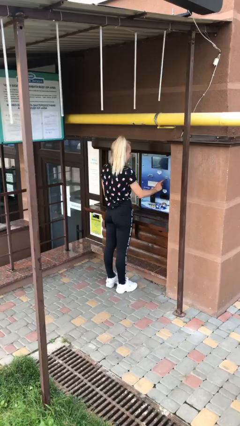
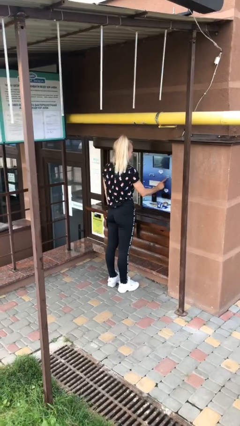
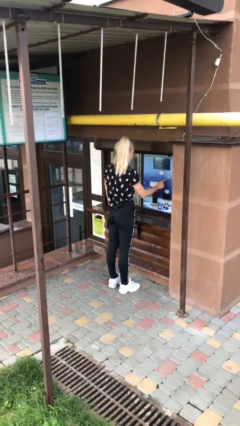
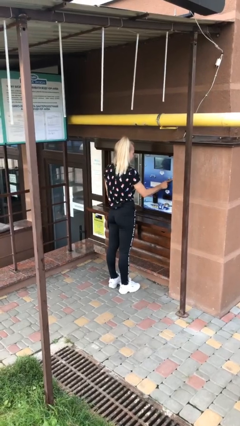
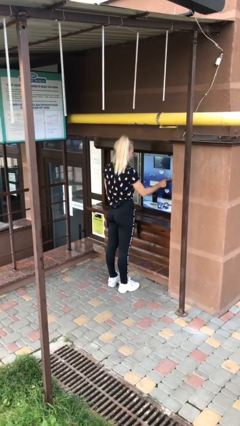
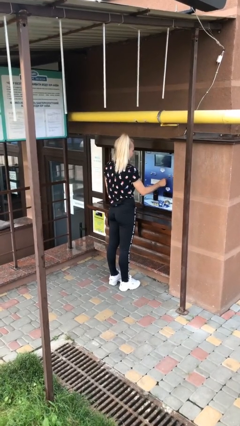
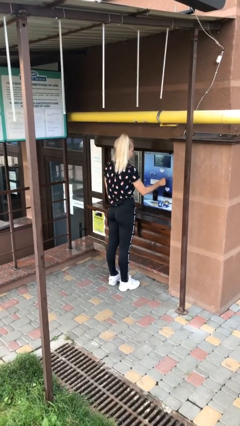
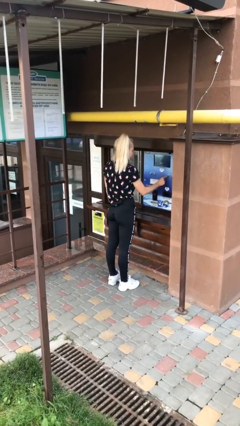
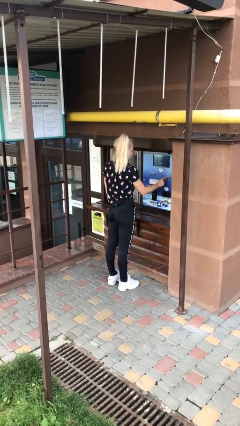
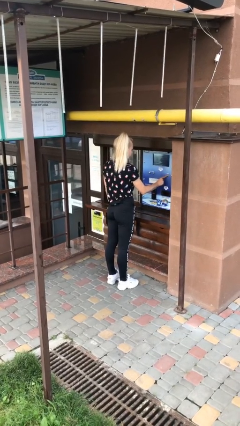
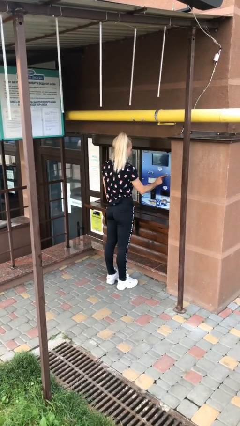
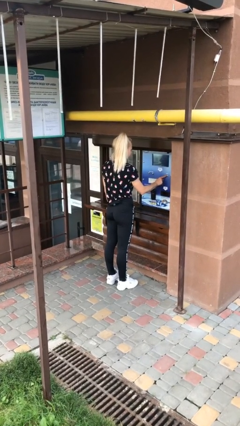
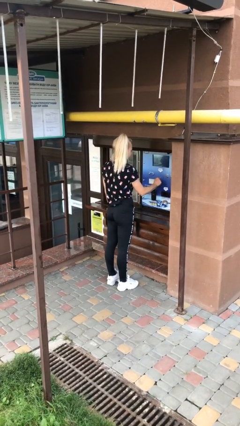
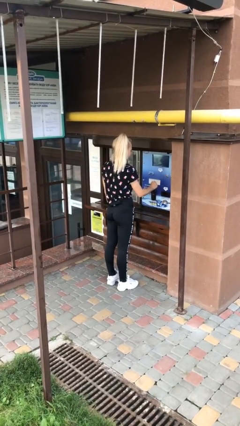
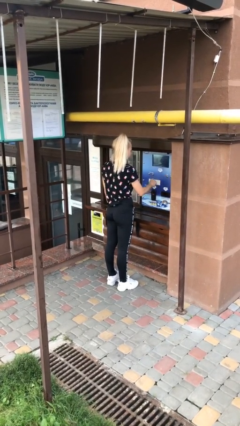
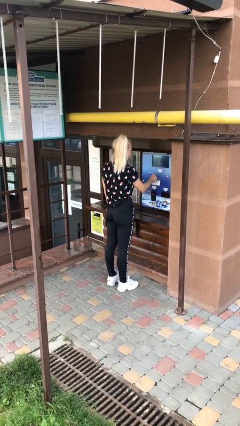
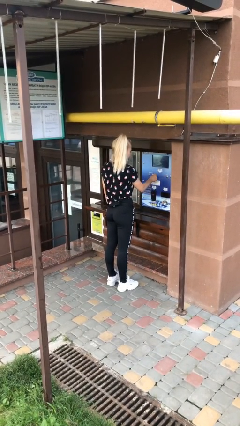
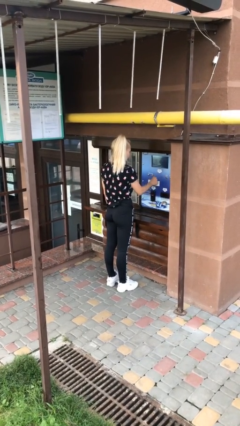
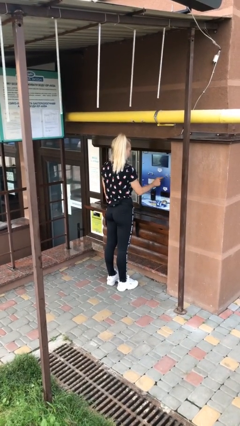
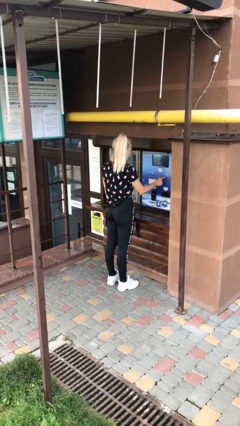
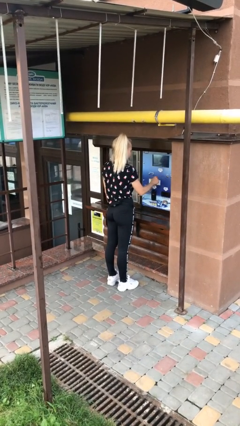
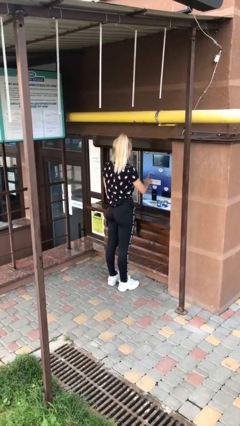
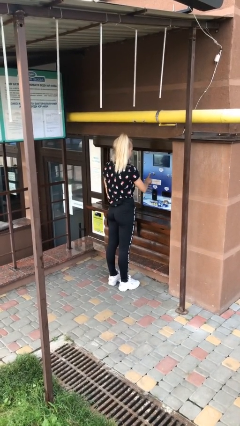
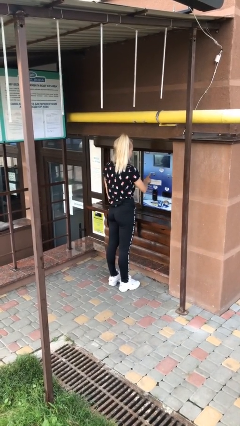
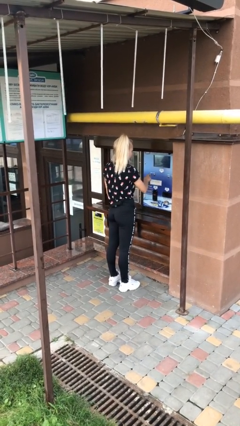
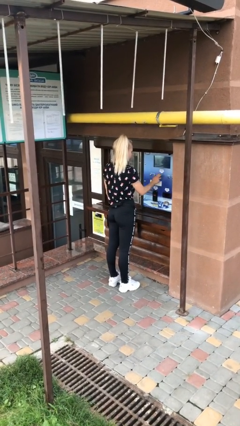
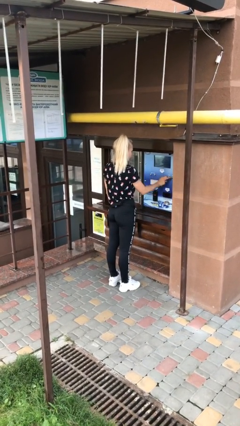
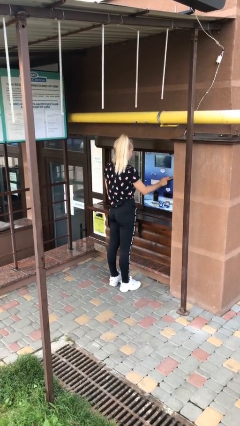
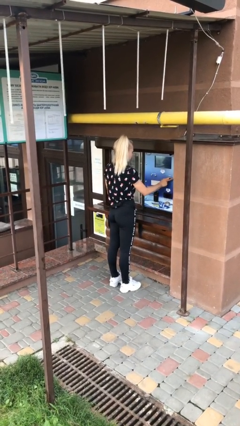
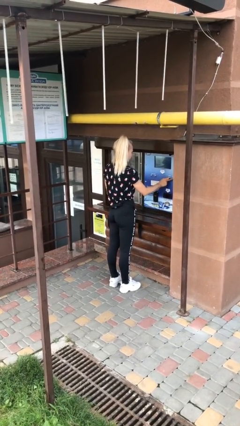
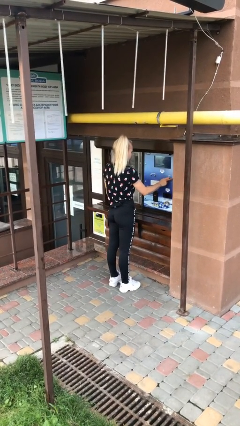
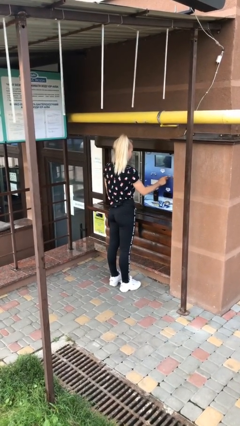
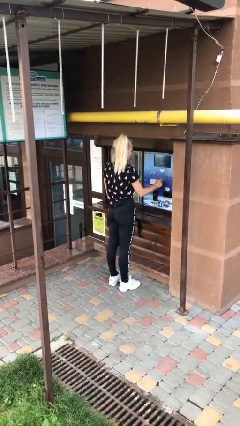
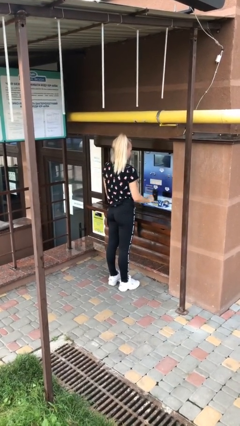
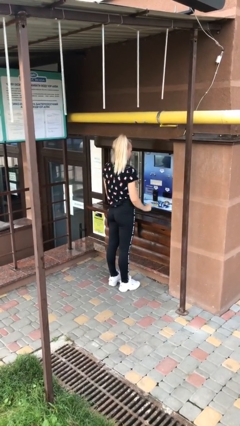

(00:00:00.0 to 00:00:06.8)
person purchases from machine

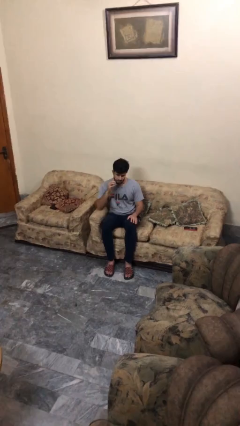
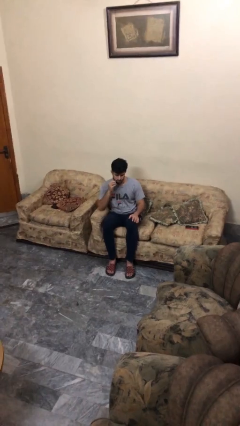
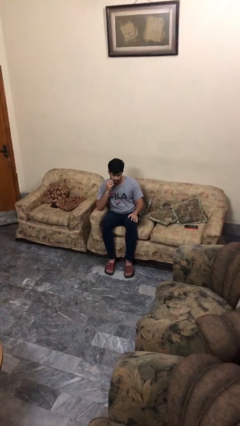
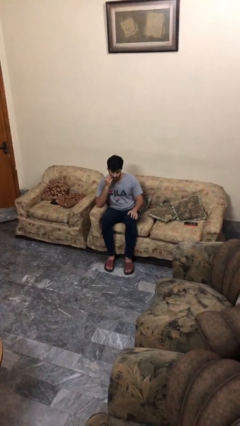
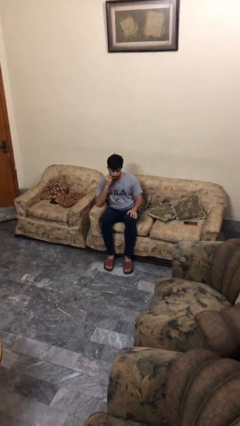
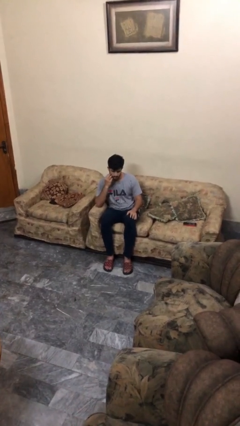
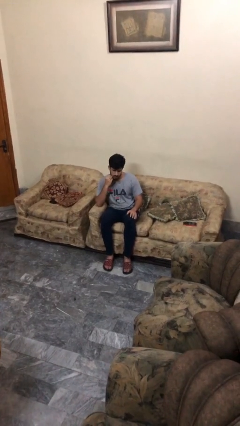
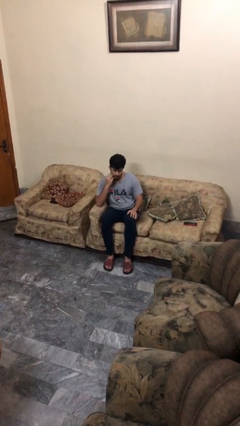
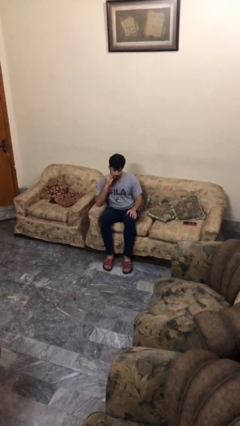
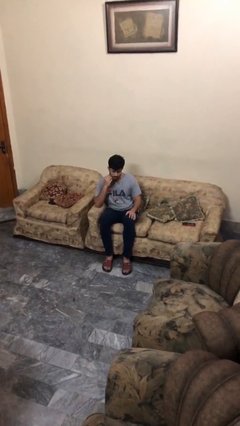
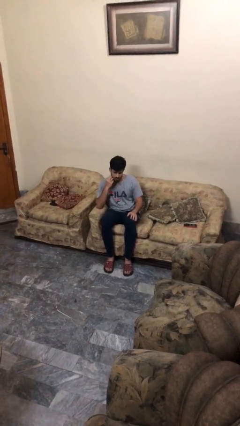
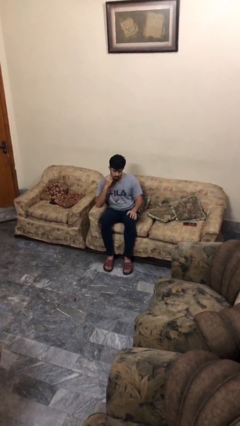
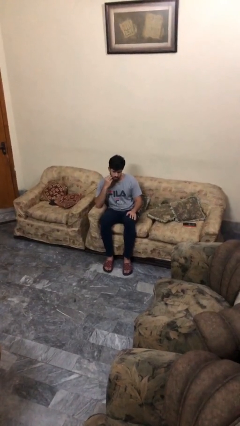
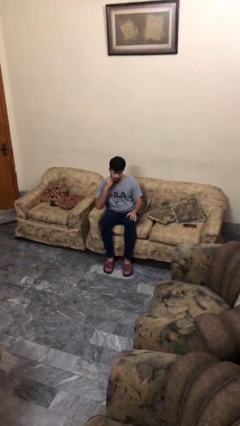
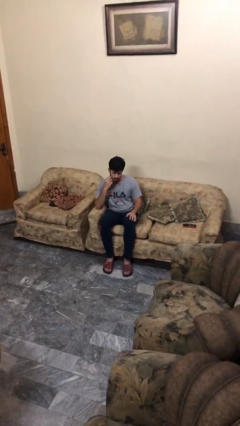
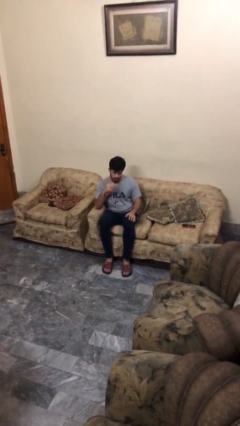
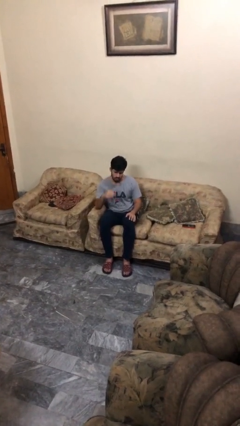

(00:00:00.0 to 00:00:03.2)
person scratches face

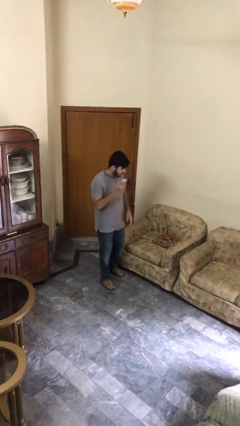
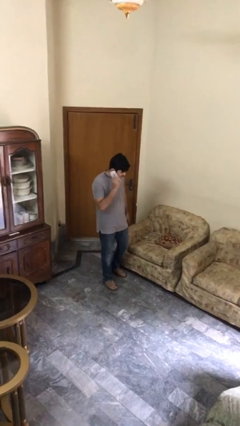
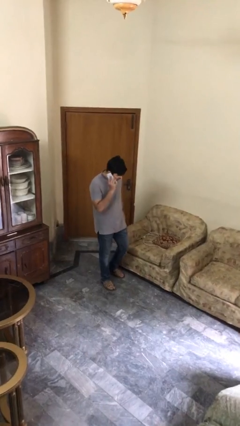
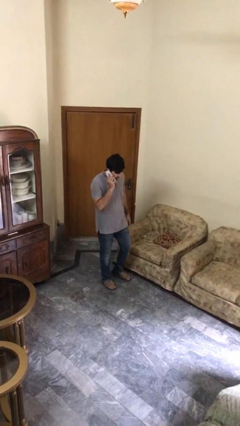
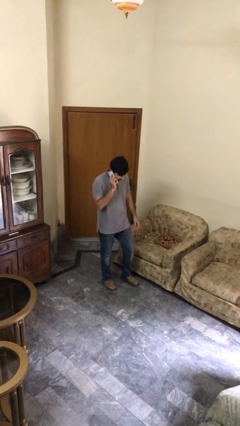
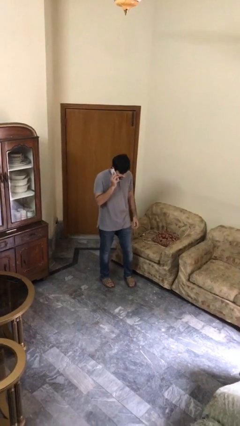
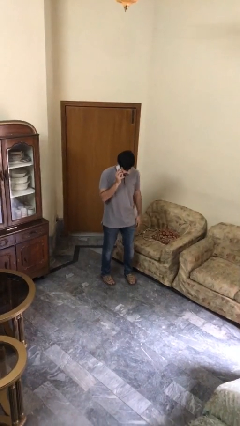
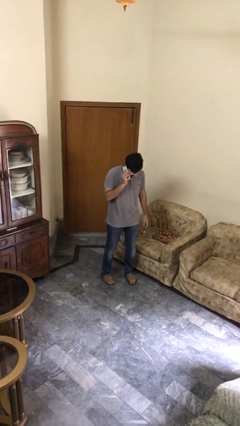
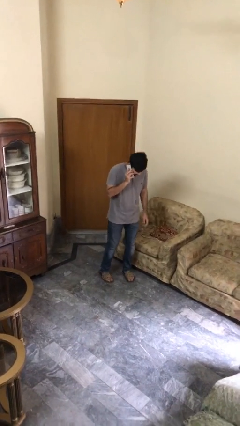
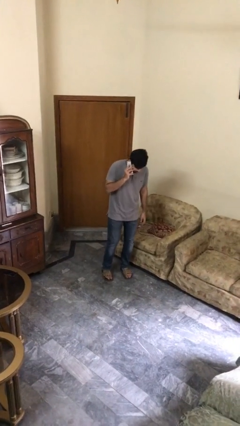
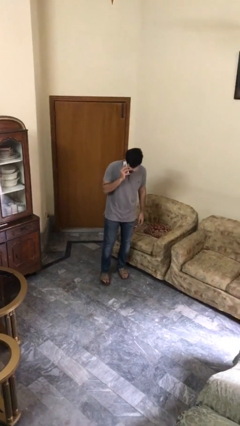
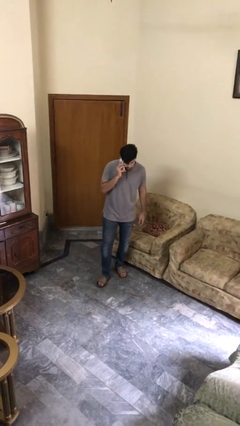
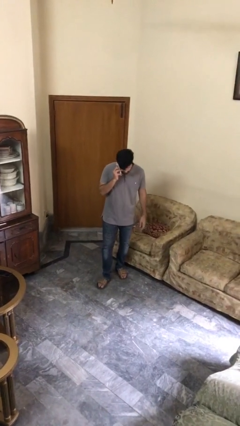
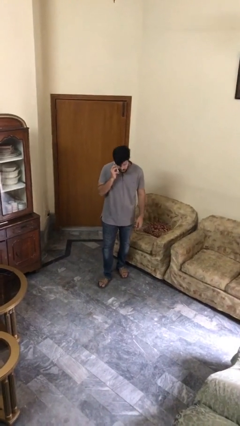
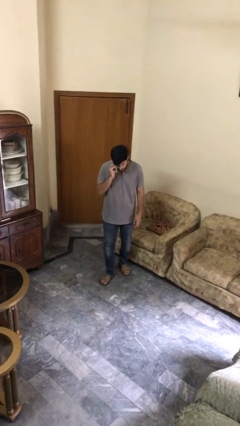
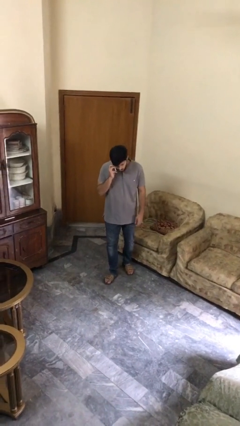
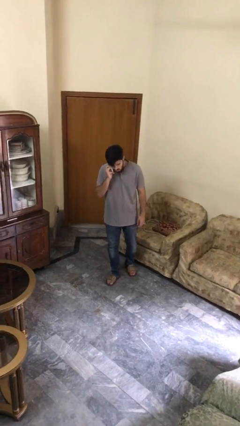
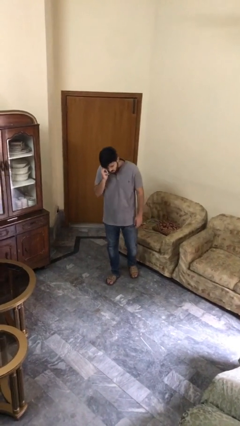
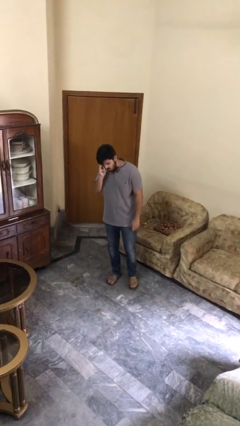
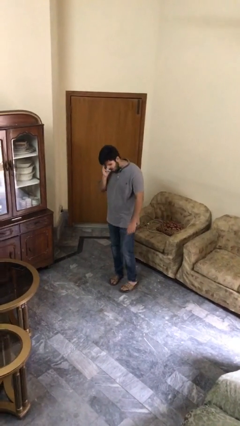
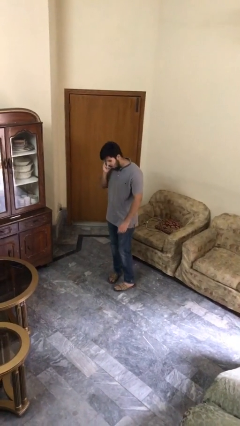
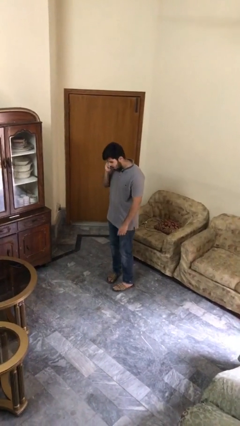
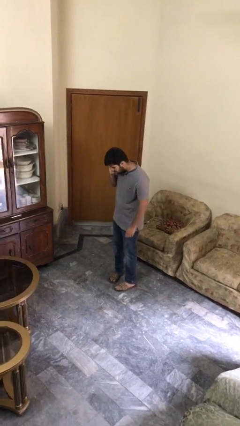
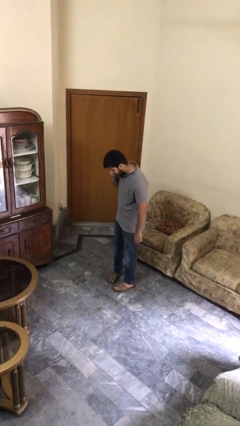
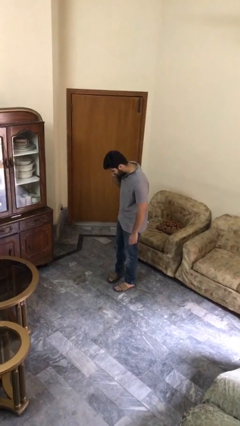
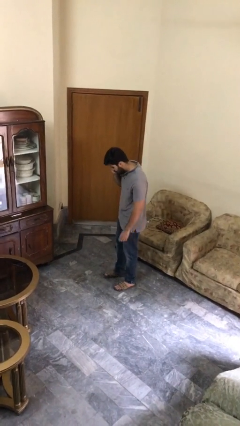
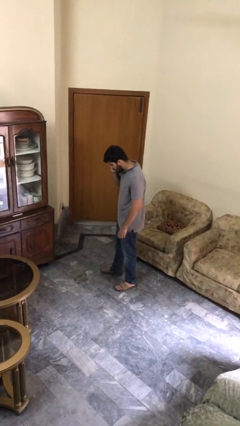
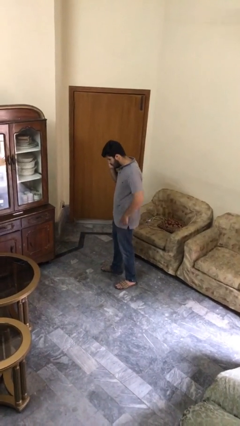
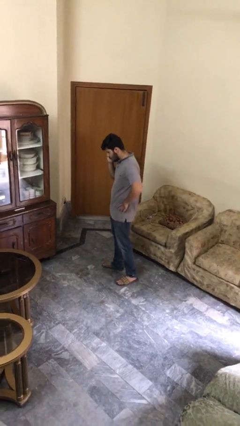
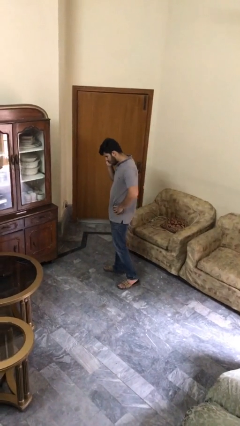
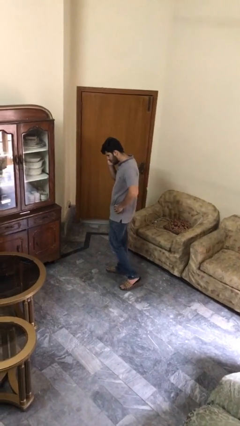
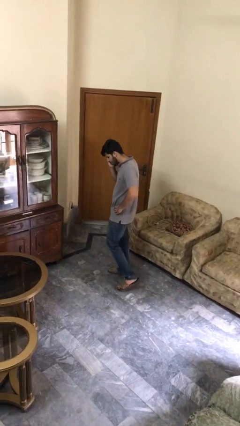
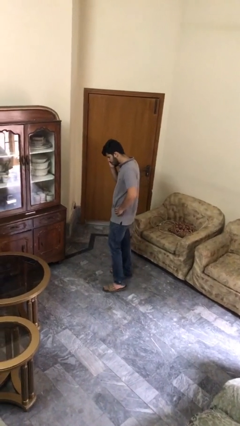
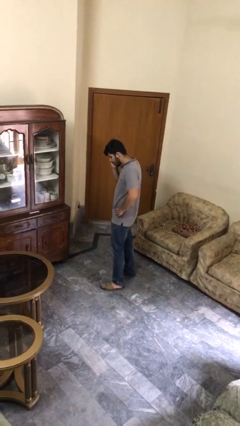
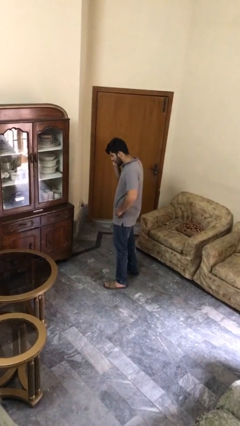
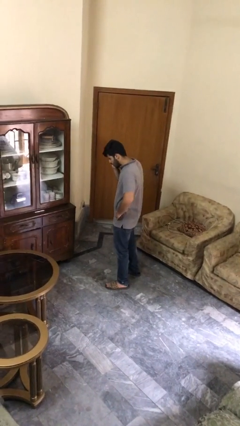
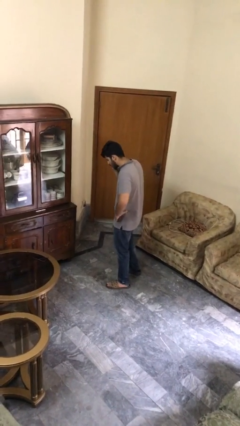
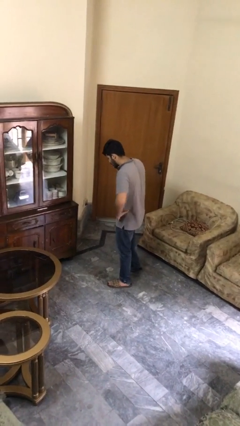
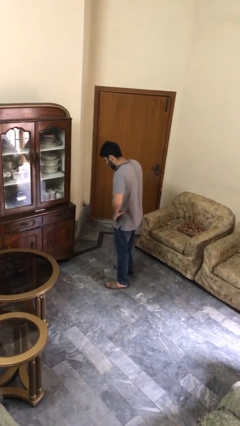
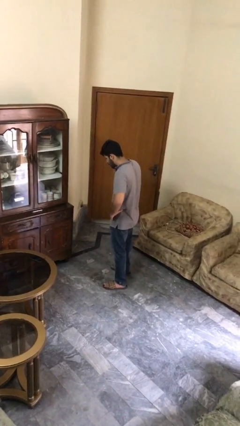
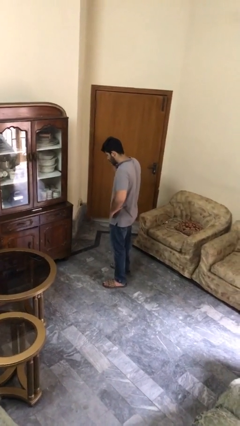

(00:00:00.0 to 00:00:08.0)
person talks on phone

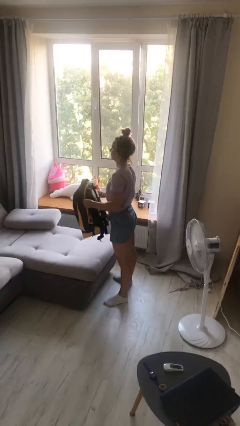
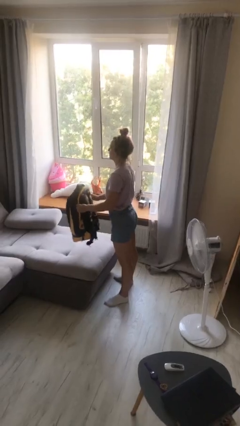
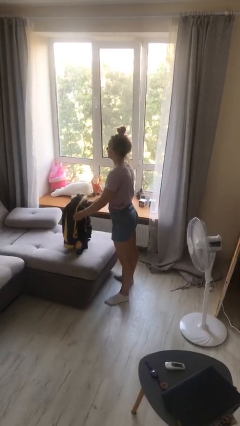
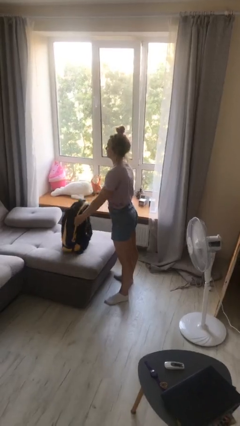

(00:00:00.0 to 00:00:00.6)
person puts down object on bed
